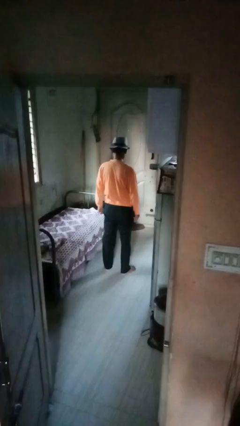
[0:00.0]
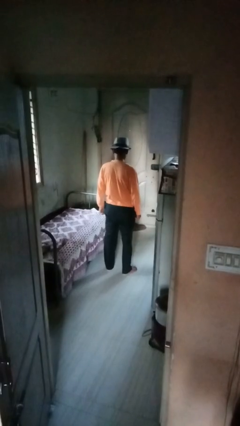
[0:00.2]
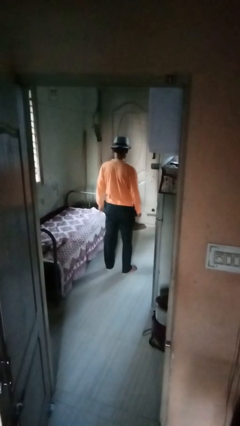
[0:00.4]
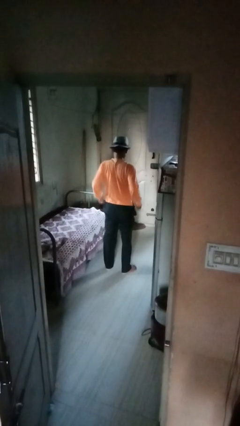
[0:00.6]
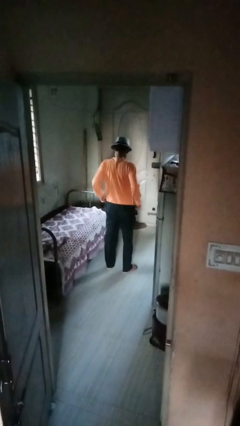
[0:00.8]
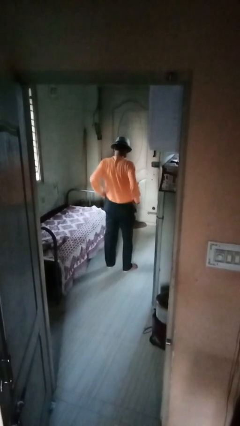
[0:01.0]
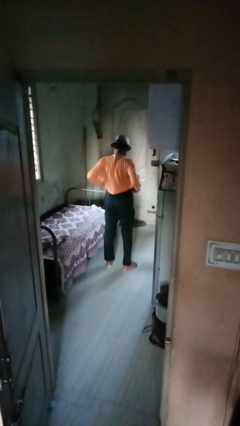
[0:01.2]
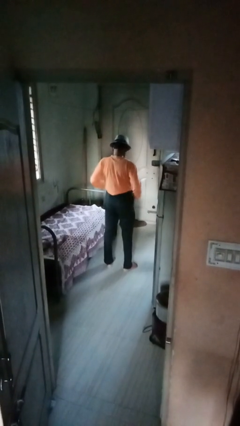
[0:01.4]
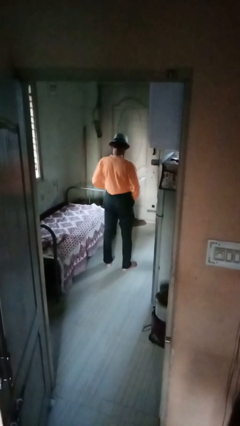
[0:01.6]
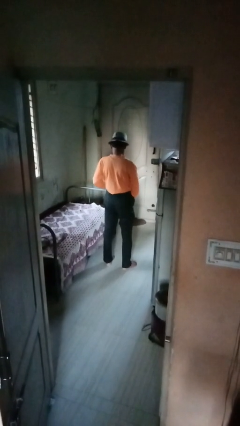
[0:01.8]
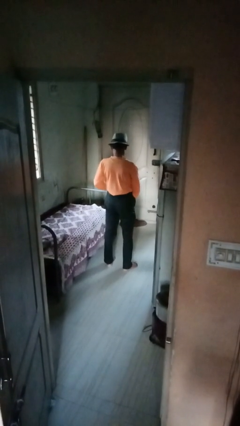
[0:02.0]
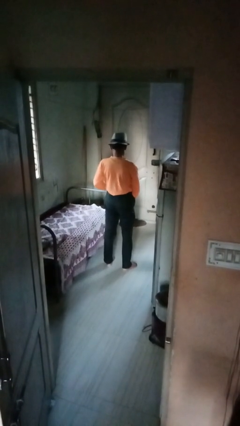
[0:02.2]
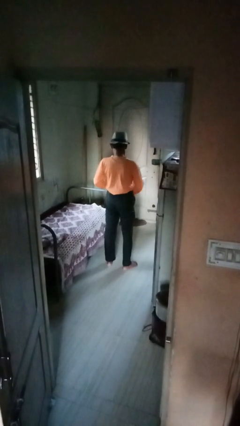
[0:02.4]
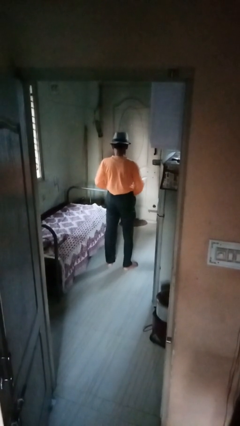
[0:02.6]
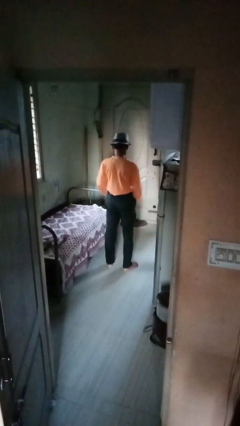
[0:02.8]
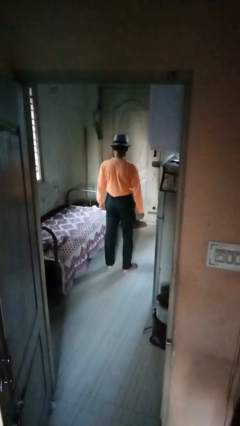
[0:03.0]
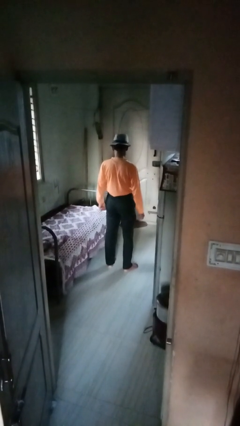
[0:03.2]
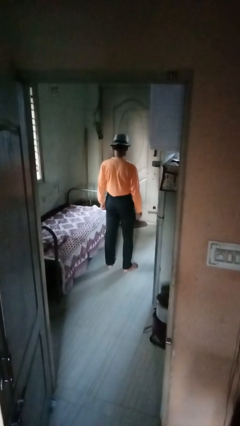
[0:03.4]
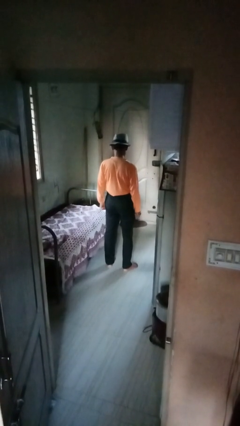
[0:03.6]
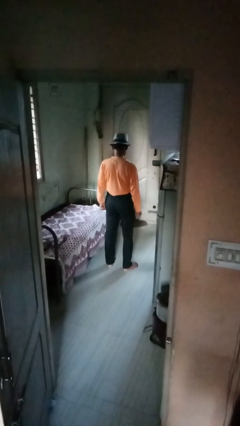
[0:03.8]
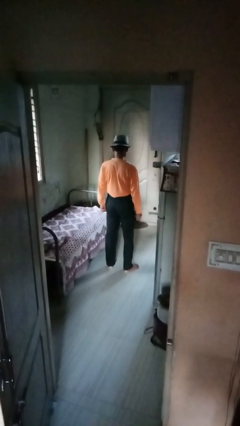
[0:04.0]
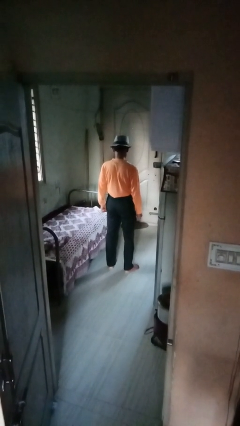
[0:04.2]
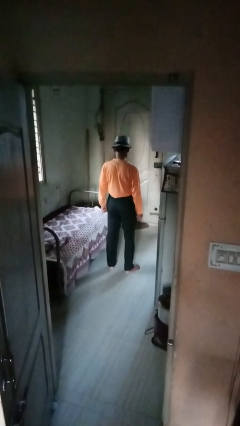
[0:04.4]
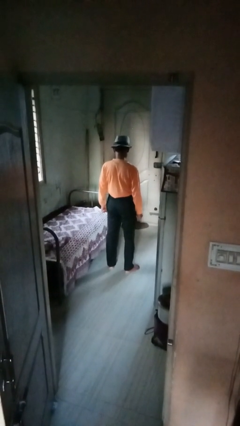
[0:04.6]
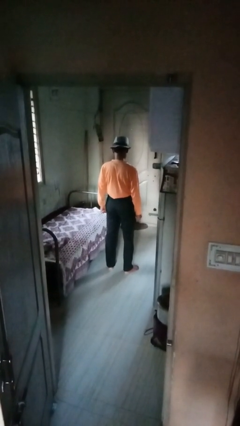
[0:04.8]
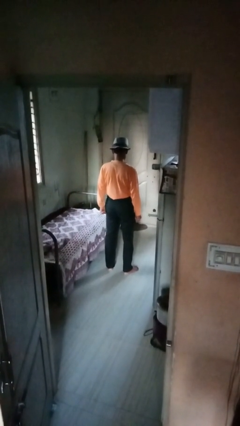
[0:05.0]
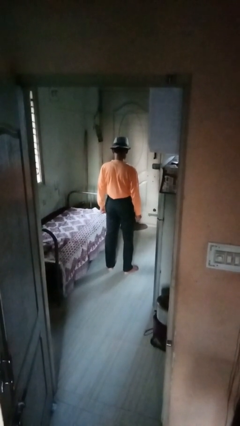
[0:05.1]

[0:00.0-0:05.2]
person hikes up pants

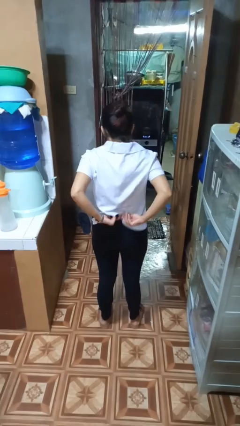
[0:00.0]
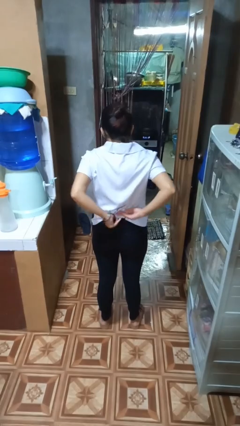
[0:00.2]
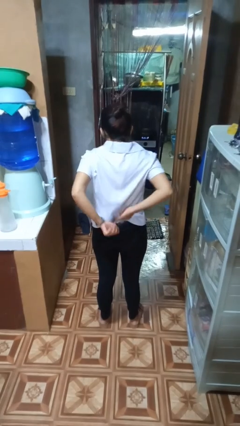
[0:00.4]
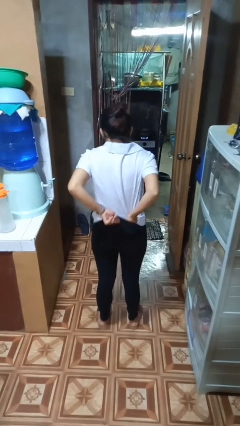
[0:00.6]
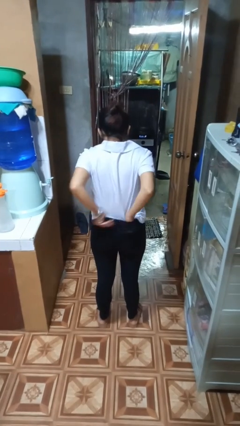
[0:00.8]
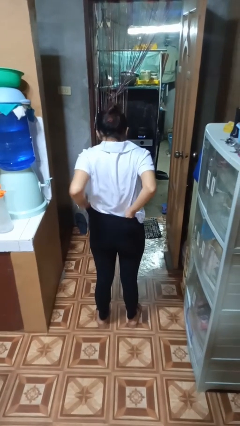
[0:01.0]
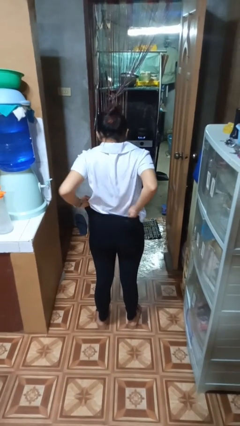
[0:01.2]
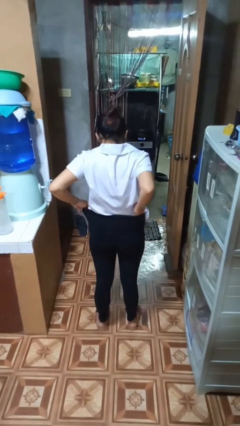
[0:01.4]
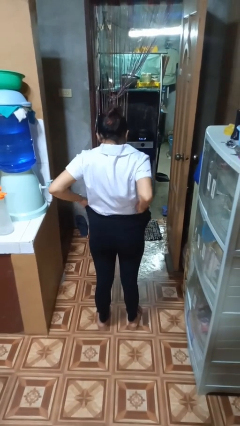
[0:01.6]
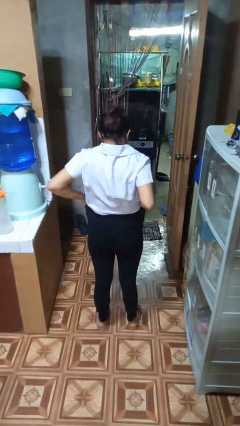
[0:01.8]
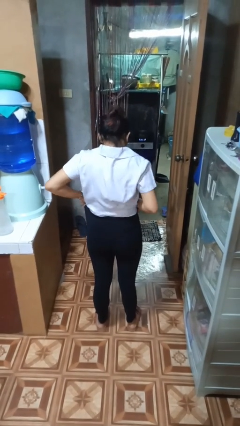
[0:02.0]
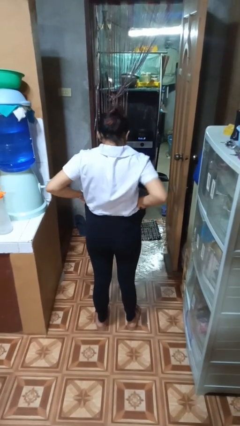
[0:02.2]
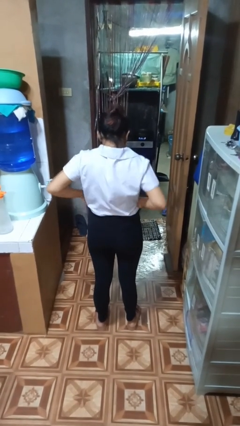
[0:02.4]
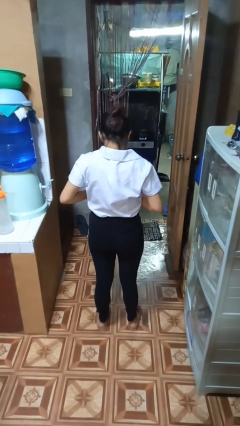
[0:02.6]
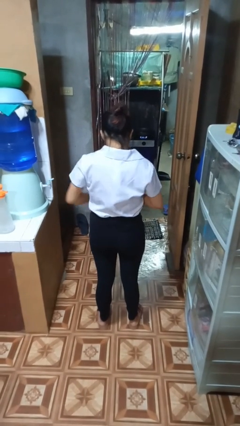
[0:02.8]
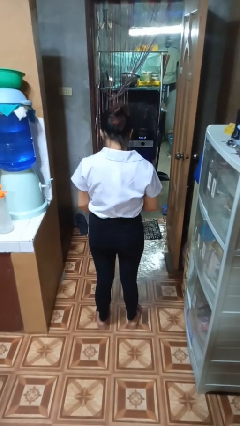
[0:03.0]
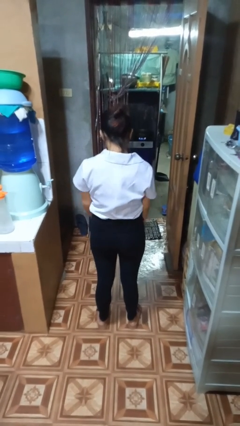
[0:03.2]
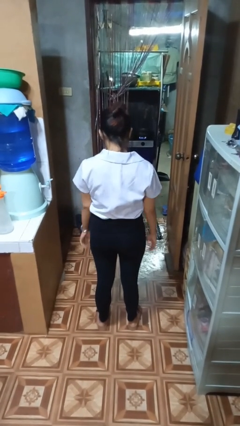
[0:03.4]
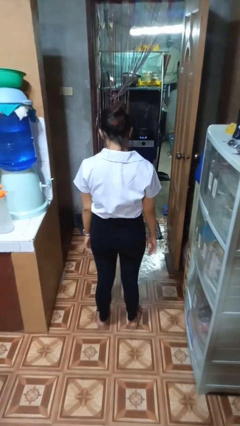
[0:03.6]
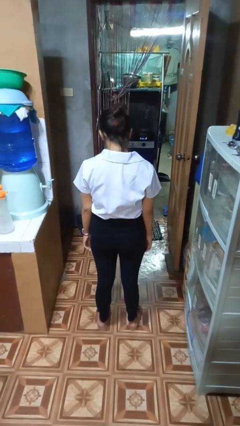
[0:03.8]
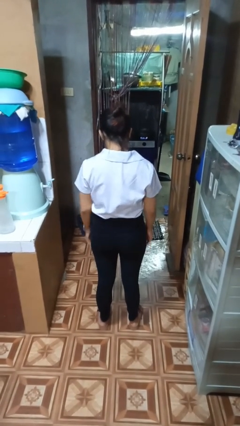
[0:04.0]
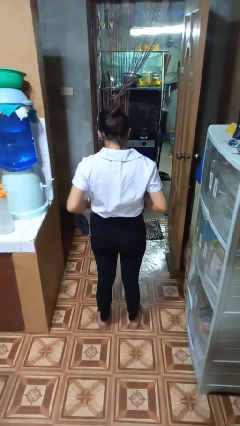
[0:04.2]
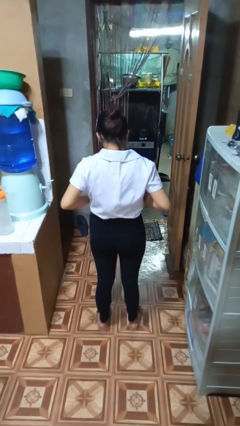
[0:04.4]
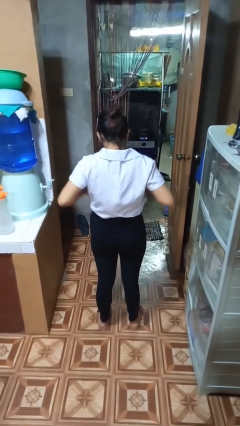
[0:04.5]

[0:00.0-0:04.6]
person tucks in shirt

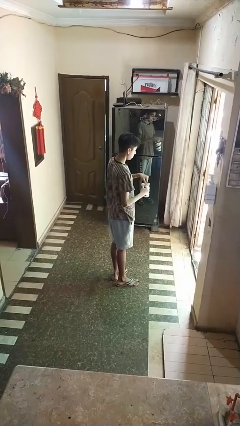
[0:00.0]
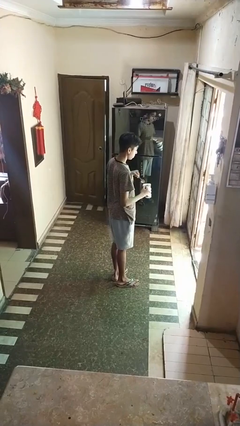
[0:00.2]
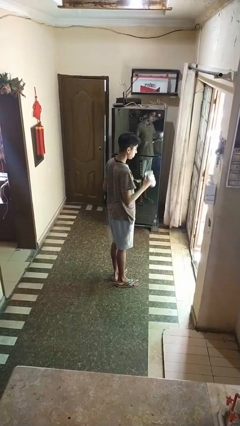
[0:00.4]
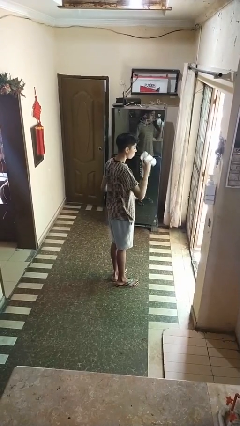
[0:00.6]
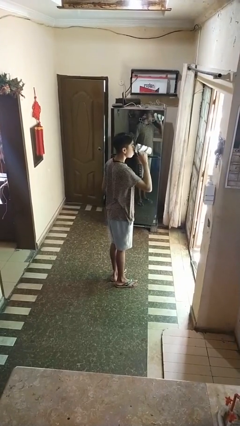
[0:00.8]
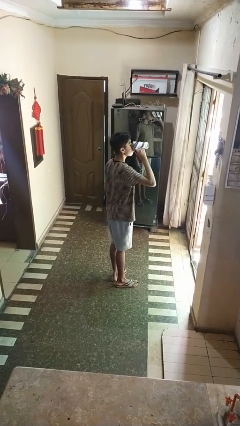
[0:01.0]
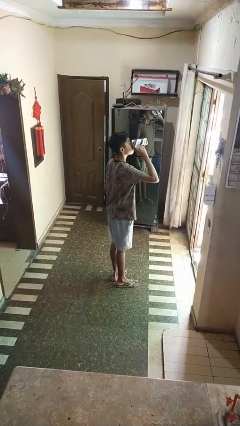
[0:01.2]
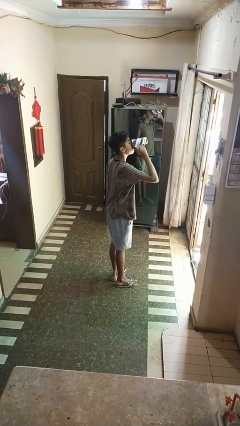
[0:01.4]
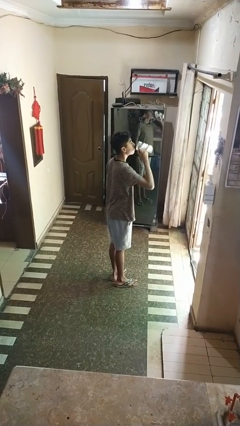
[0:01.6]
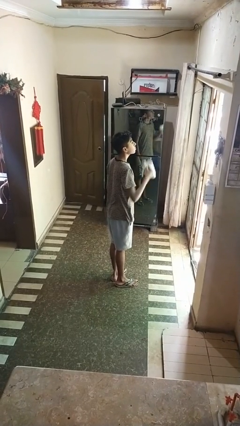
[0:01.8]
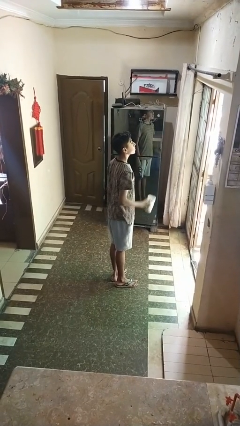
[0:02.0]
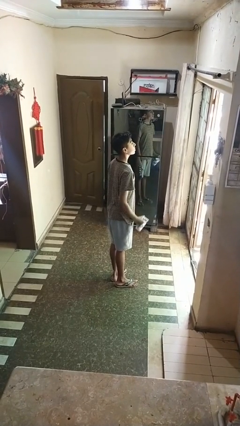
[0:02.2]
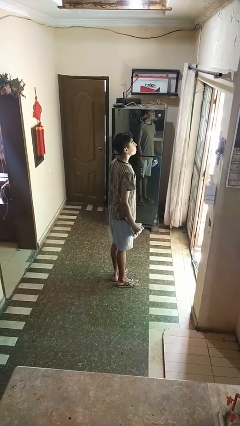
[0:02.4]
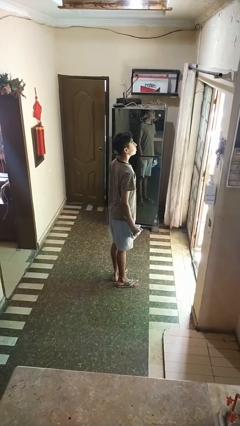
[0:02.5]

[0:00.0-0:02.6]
person drinks from mug

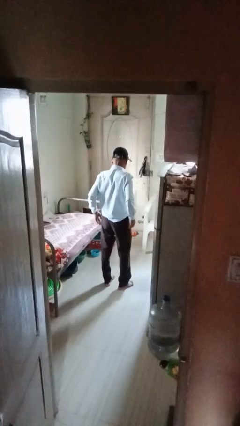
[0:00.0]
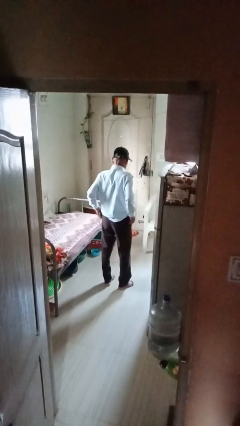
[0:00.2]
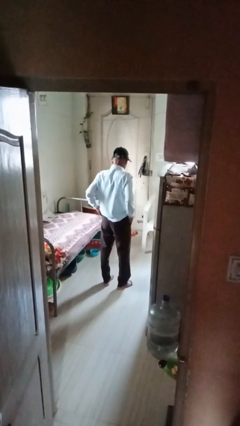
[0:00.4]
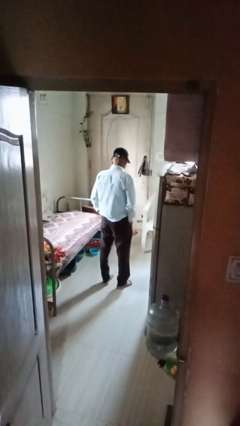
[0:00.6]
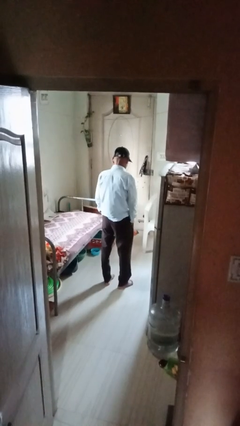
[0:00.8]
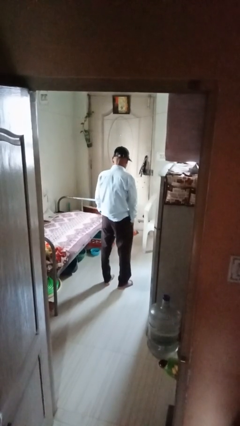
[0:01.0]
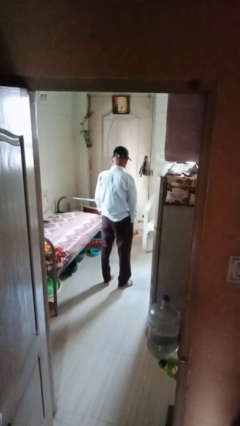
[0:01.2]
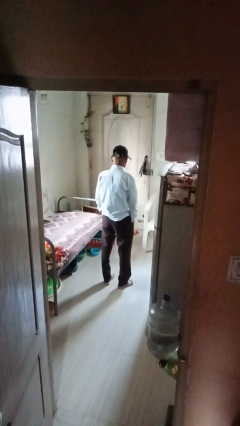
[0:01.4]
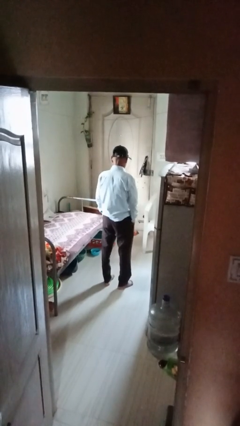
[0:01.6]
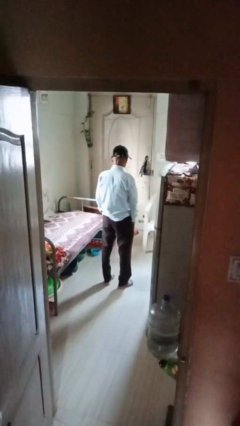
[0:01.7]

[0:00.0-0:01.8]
person puts hands in back pockets

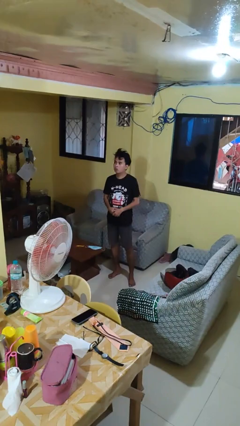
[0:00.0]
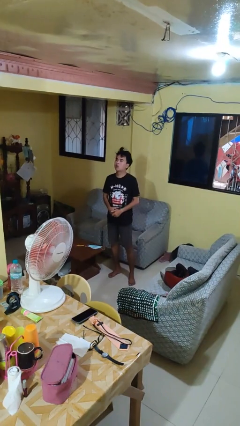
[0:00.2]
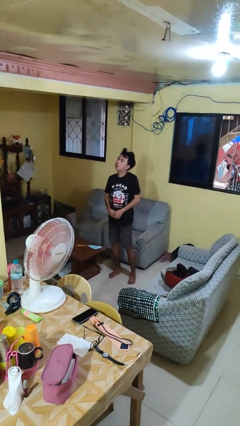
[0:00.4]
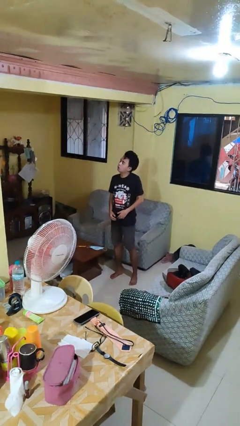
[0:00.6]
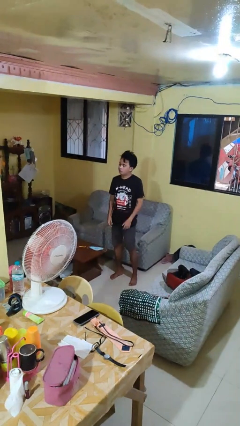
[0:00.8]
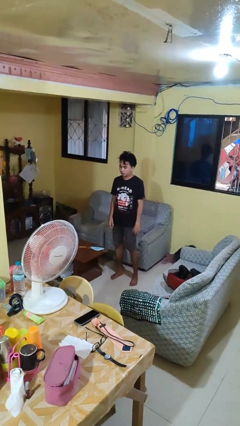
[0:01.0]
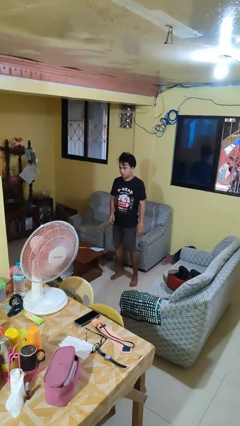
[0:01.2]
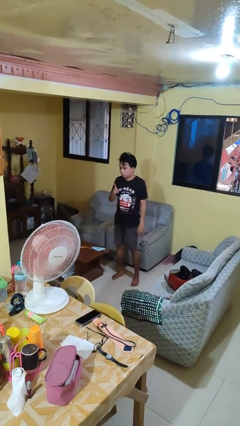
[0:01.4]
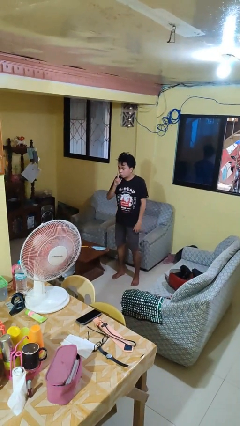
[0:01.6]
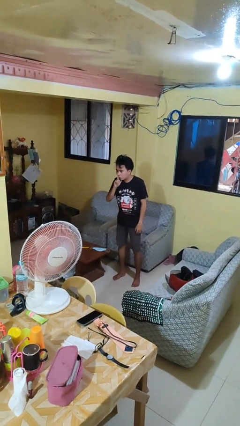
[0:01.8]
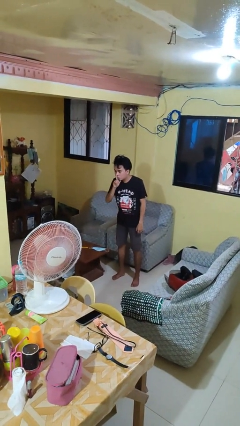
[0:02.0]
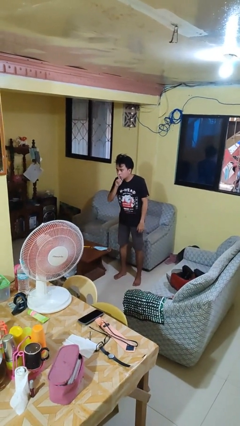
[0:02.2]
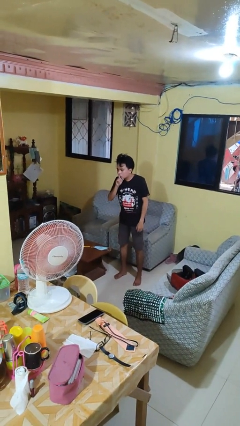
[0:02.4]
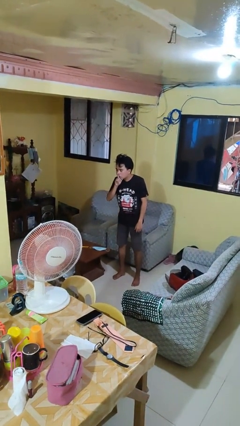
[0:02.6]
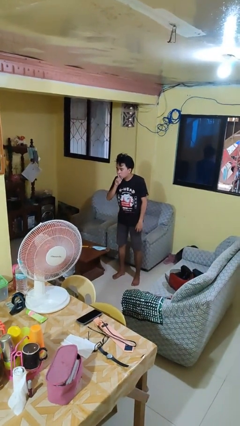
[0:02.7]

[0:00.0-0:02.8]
person gestures be quiet

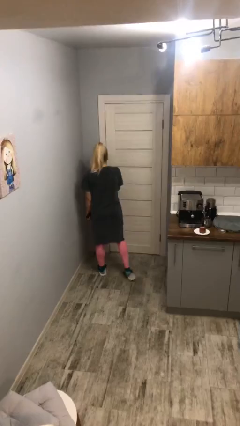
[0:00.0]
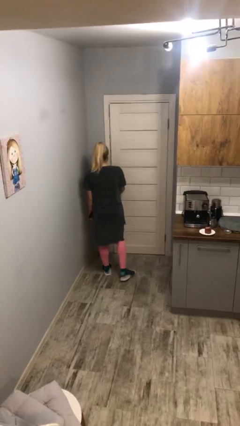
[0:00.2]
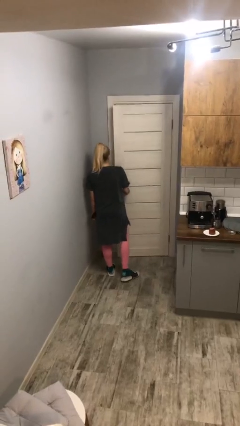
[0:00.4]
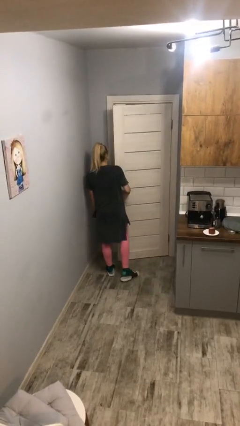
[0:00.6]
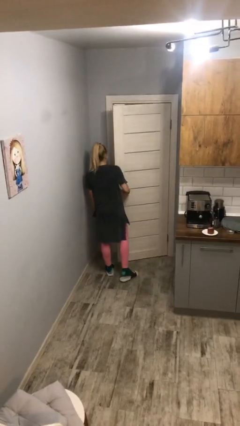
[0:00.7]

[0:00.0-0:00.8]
person opens facility door
